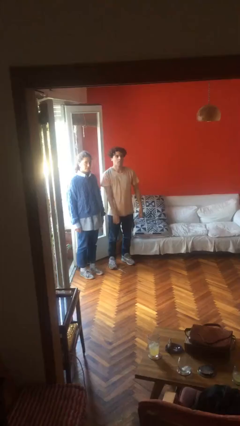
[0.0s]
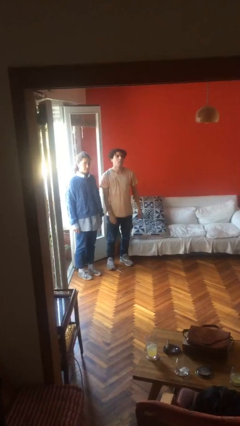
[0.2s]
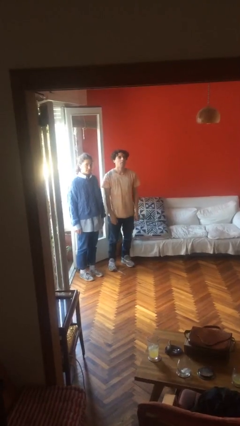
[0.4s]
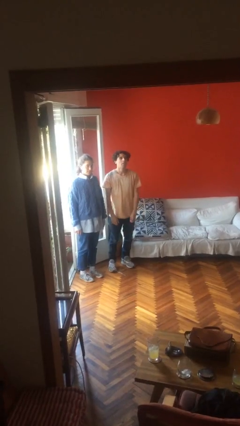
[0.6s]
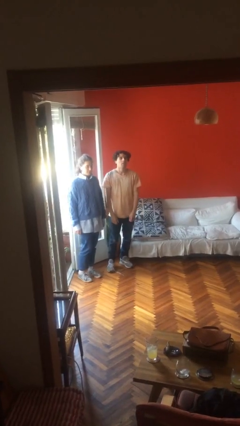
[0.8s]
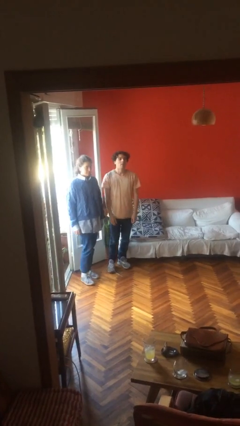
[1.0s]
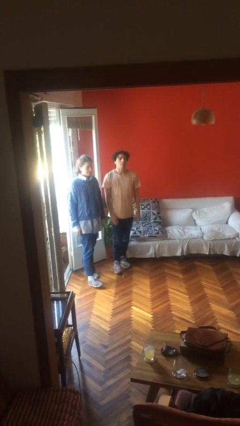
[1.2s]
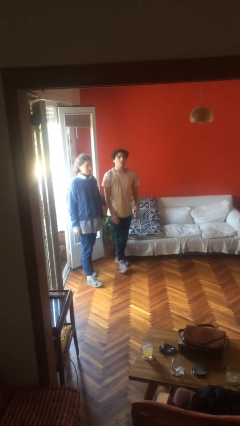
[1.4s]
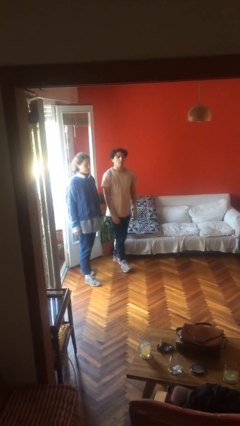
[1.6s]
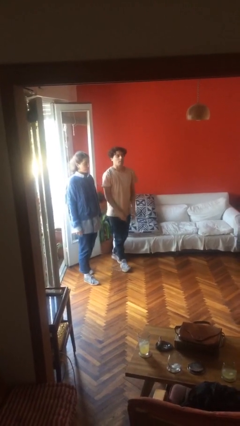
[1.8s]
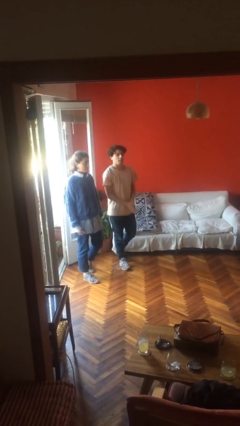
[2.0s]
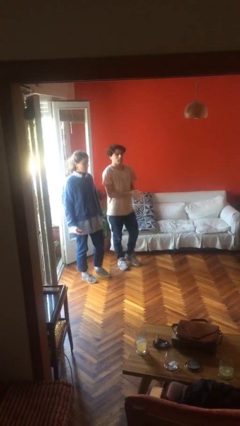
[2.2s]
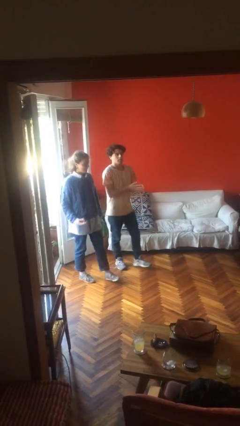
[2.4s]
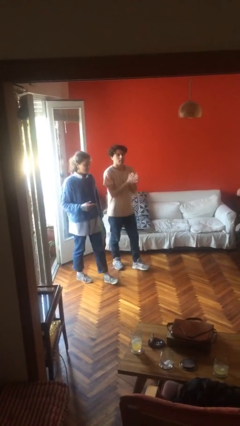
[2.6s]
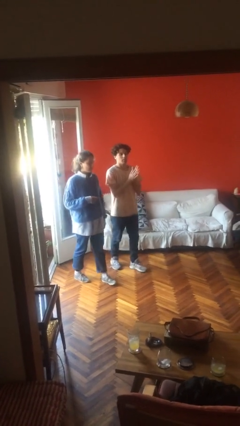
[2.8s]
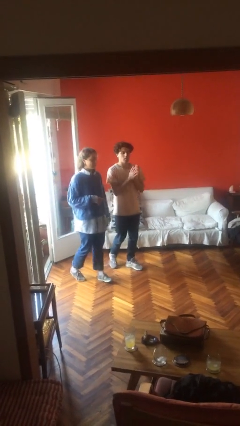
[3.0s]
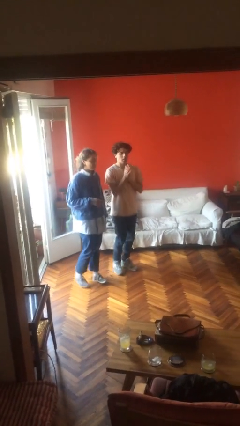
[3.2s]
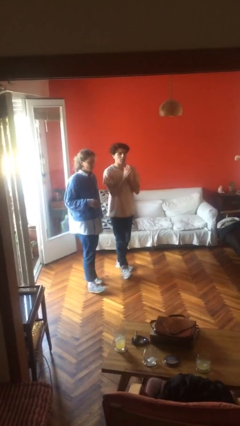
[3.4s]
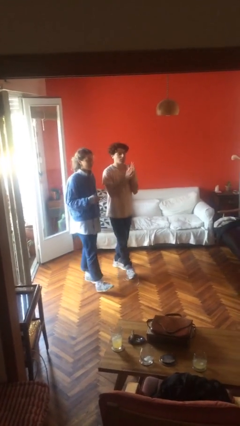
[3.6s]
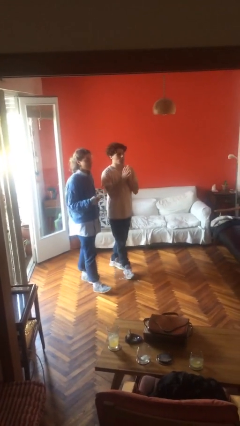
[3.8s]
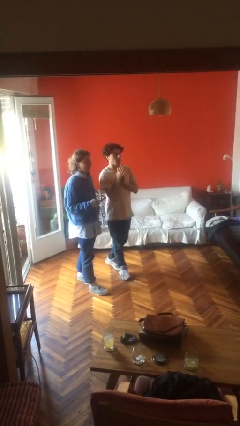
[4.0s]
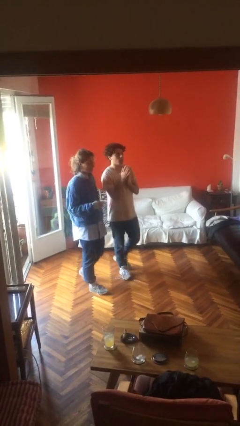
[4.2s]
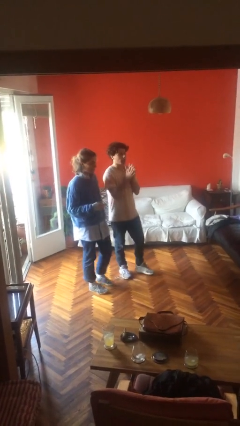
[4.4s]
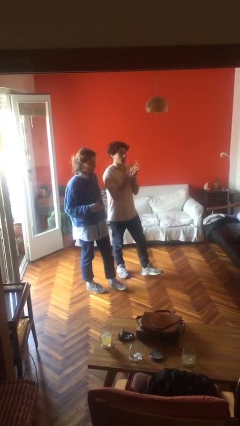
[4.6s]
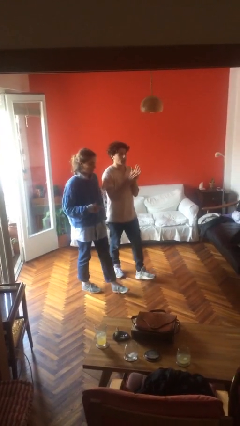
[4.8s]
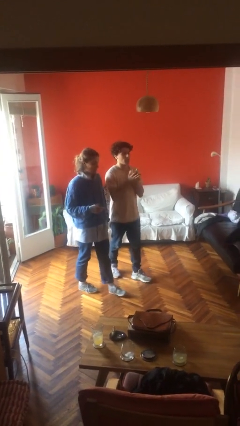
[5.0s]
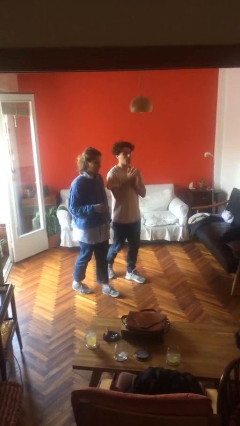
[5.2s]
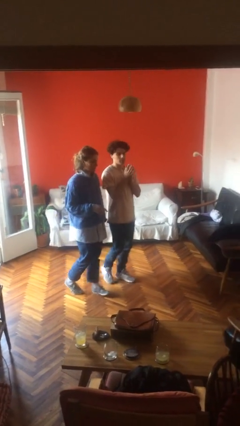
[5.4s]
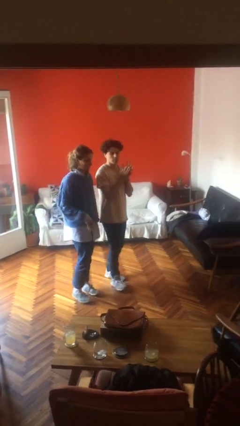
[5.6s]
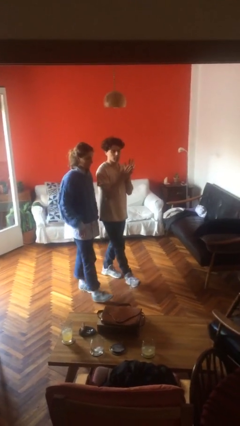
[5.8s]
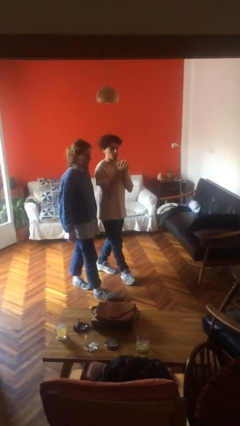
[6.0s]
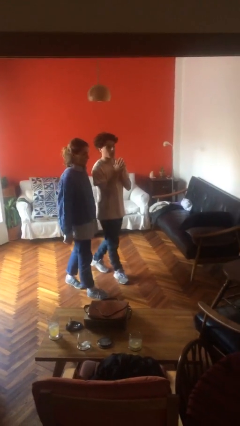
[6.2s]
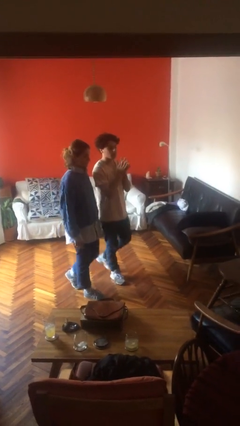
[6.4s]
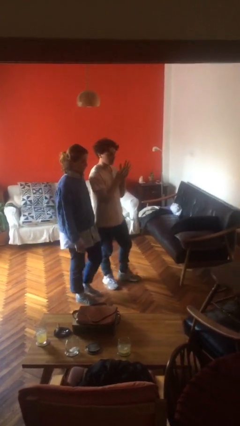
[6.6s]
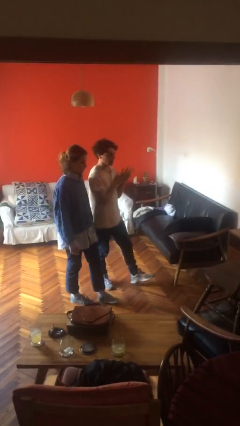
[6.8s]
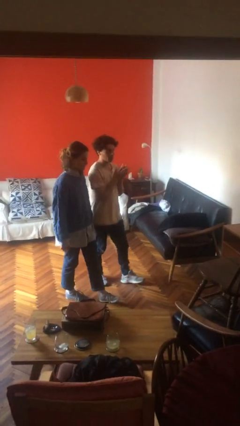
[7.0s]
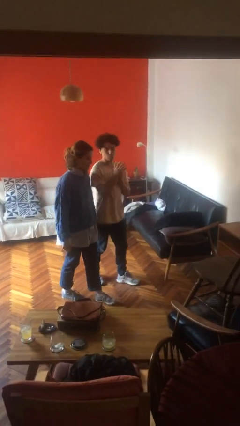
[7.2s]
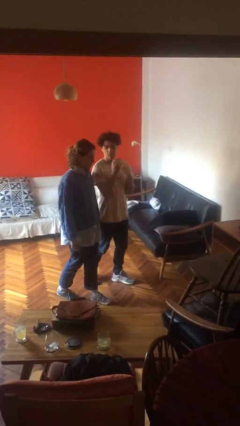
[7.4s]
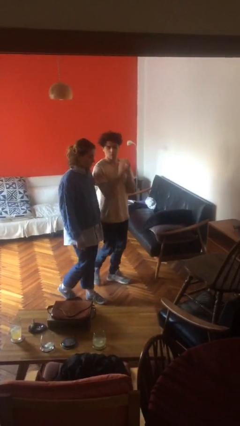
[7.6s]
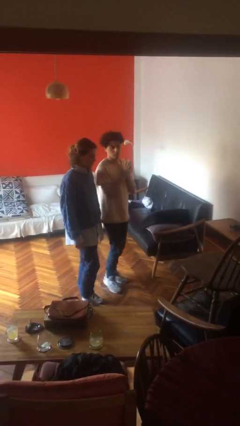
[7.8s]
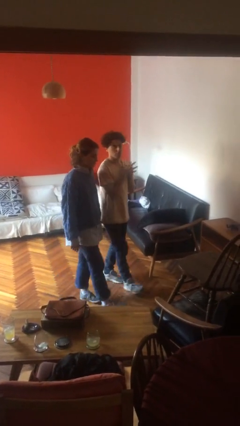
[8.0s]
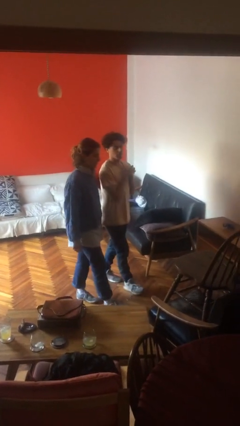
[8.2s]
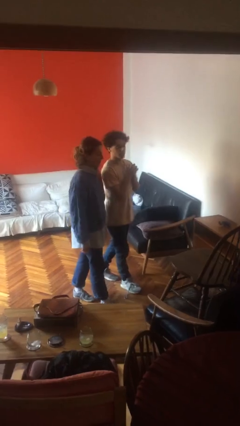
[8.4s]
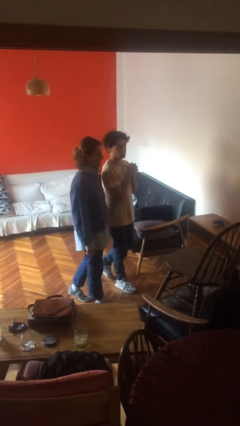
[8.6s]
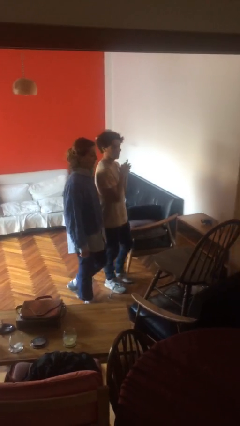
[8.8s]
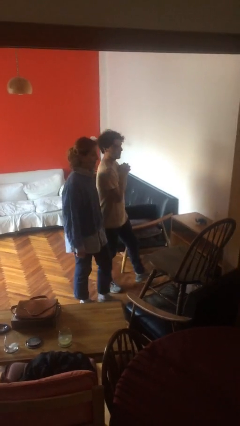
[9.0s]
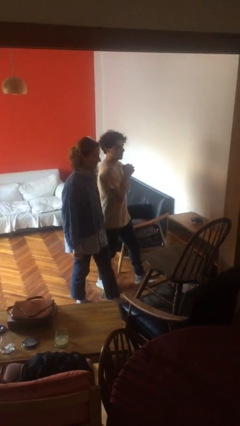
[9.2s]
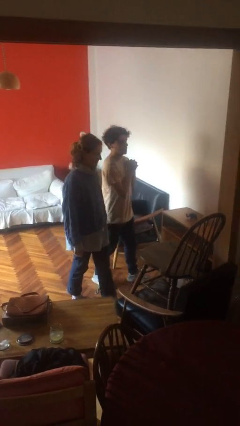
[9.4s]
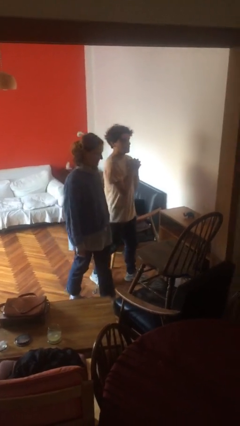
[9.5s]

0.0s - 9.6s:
person talks to person

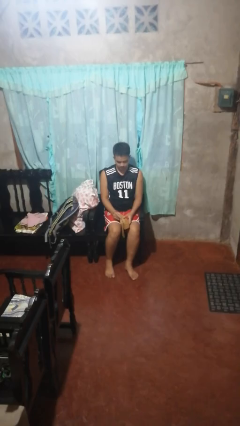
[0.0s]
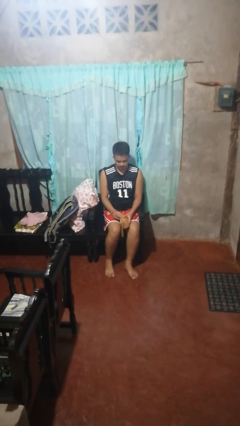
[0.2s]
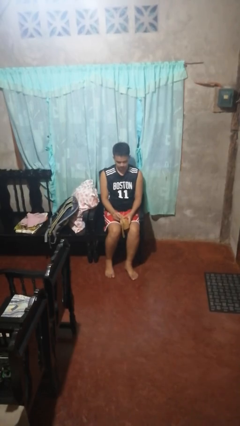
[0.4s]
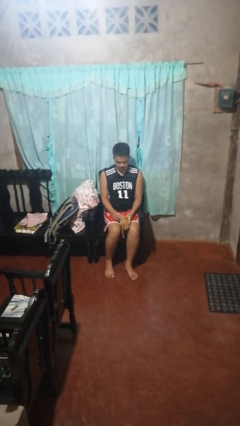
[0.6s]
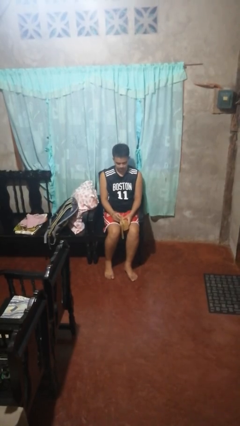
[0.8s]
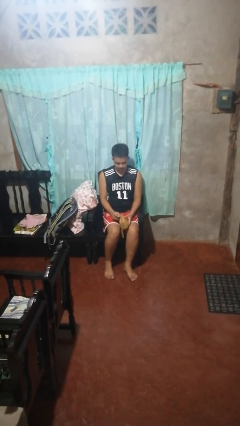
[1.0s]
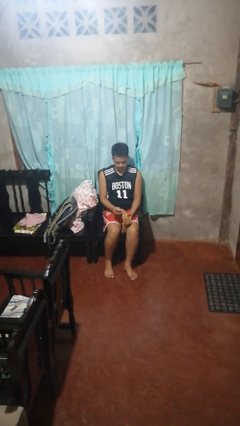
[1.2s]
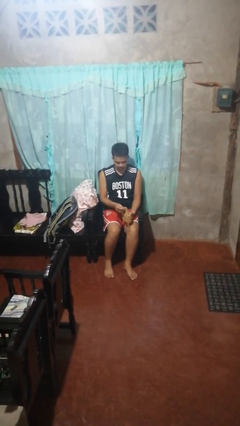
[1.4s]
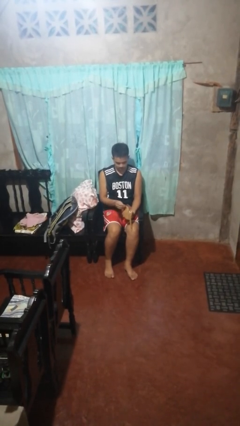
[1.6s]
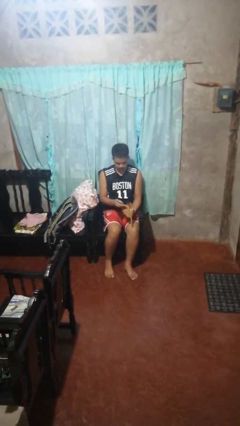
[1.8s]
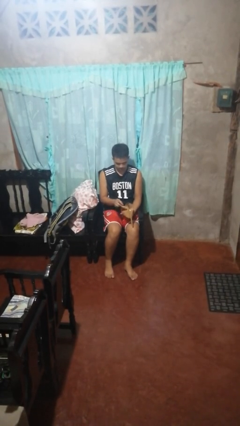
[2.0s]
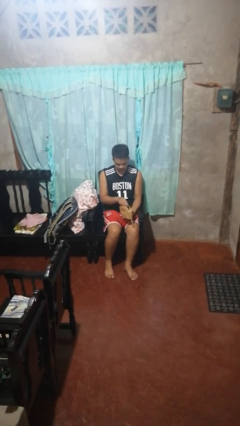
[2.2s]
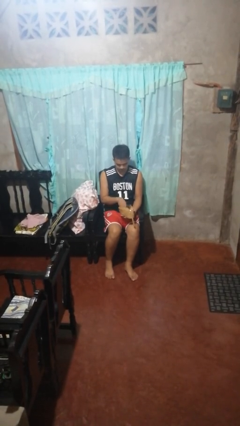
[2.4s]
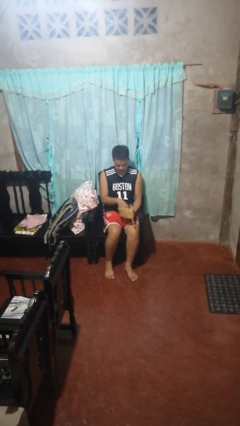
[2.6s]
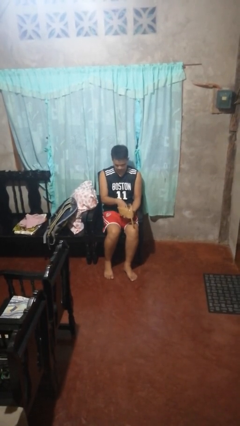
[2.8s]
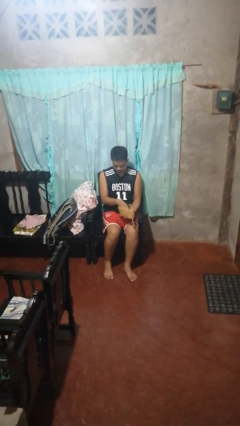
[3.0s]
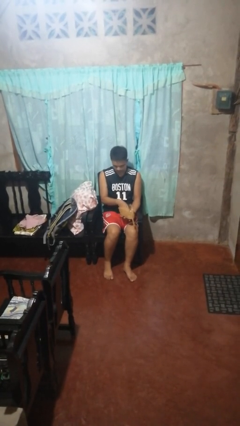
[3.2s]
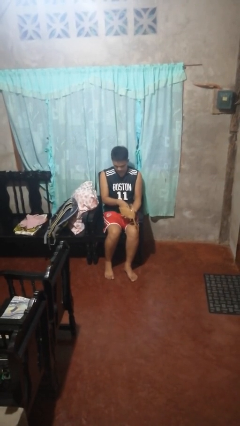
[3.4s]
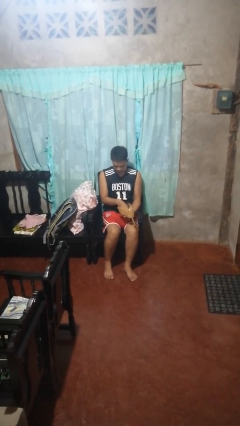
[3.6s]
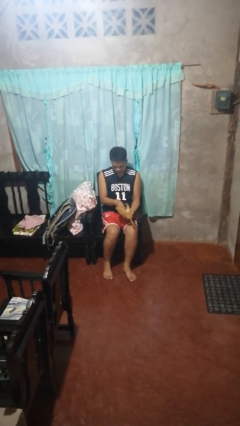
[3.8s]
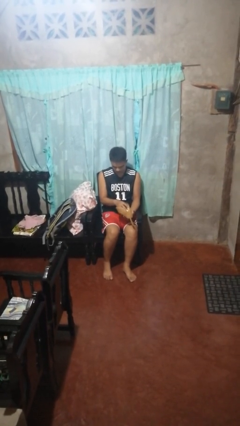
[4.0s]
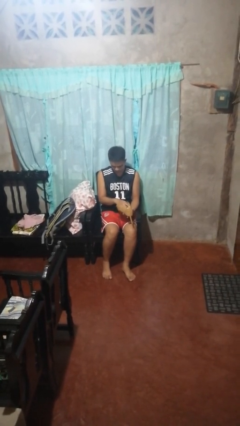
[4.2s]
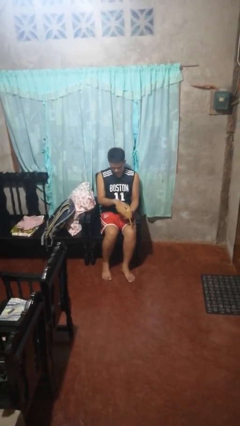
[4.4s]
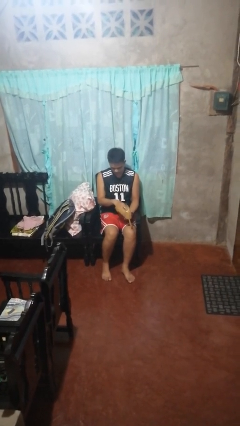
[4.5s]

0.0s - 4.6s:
person searches in purse

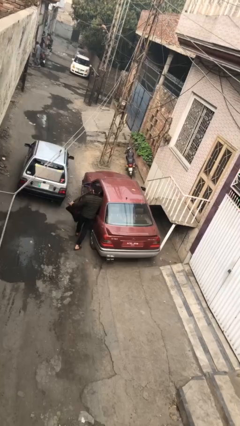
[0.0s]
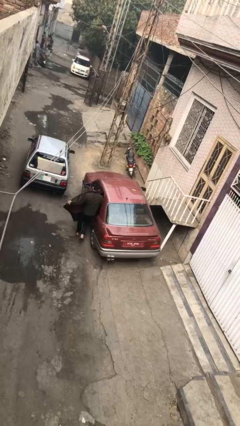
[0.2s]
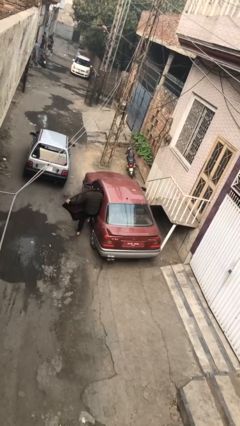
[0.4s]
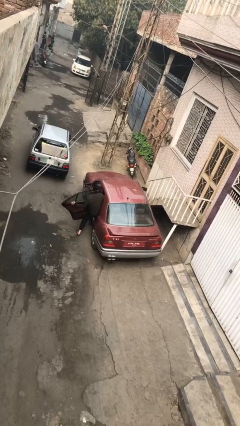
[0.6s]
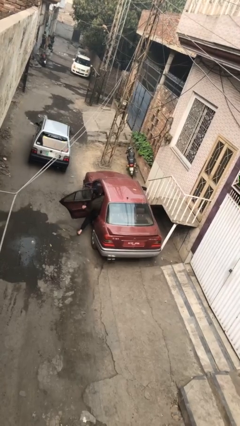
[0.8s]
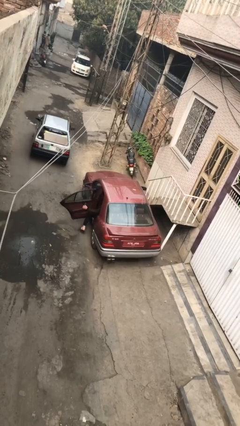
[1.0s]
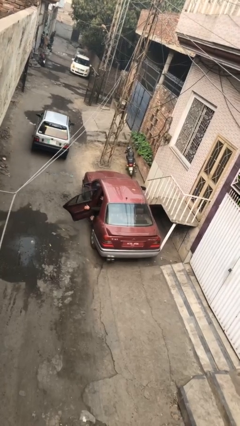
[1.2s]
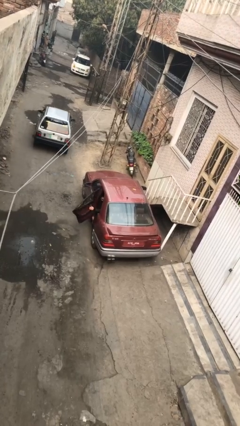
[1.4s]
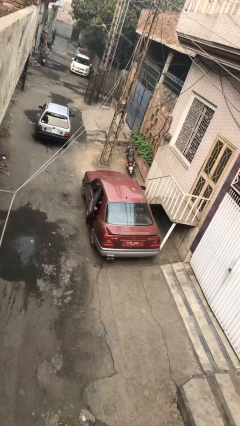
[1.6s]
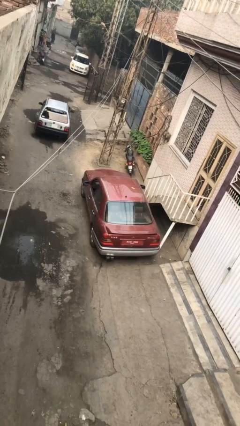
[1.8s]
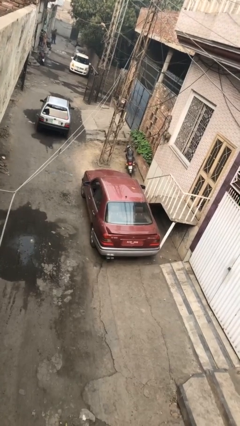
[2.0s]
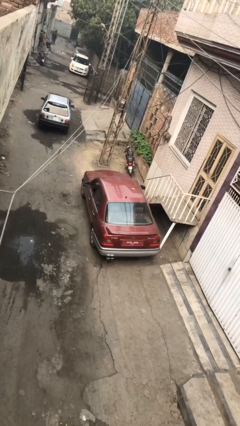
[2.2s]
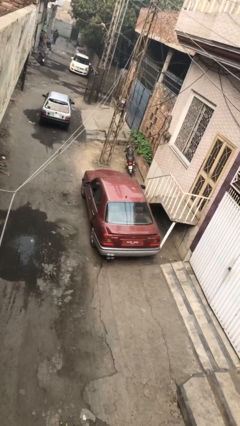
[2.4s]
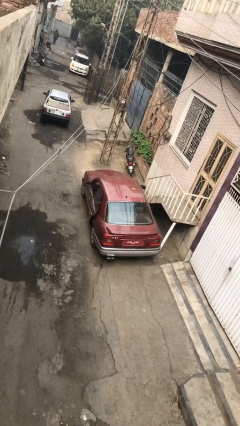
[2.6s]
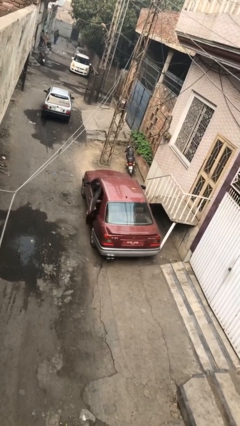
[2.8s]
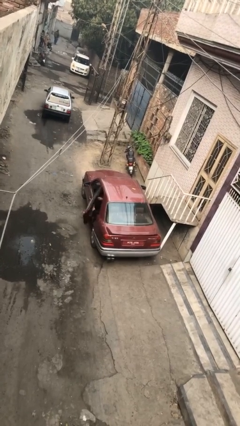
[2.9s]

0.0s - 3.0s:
car picks up person

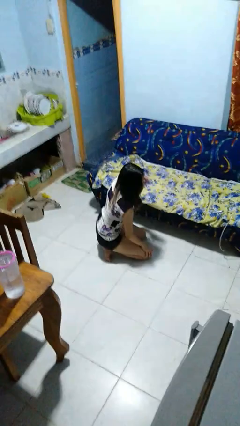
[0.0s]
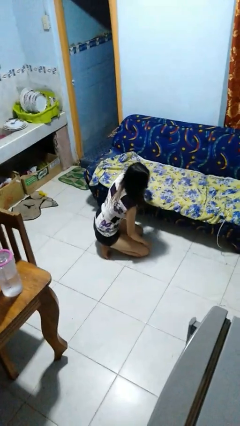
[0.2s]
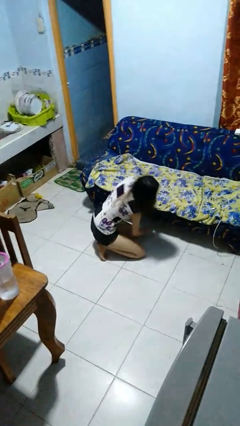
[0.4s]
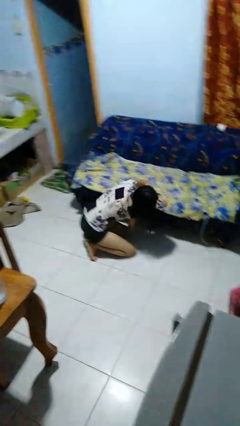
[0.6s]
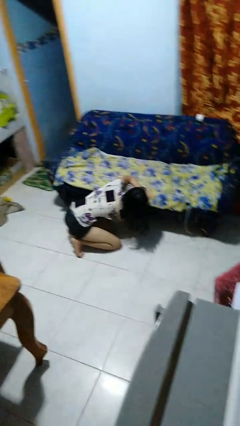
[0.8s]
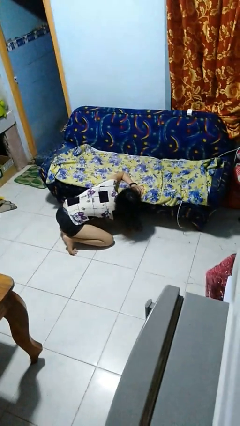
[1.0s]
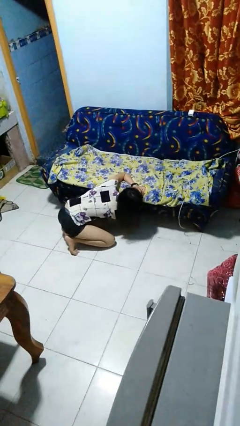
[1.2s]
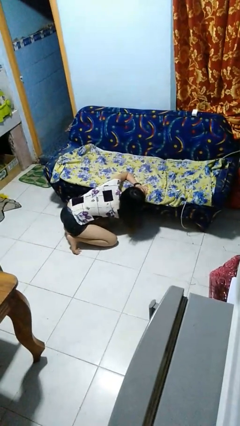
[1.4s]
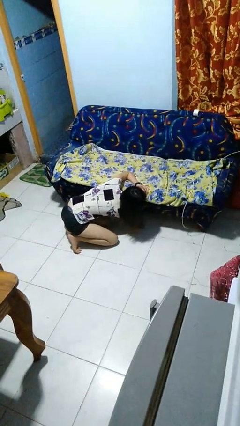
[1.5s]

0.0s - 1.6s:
person searches under couch
